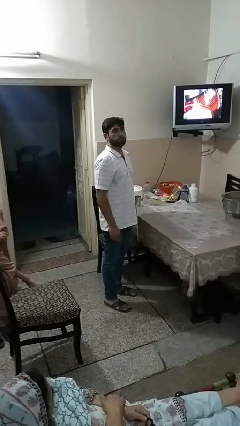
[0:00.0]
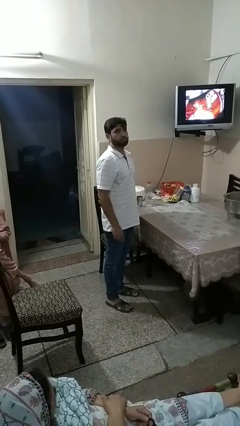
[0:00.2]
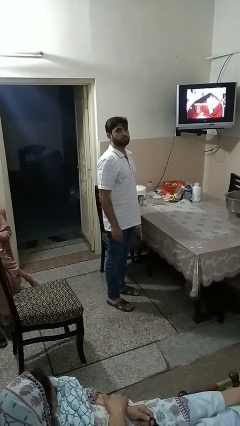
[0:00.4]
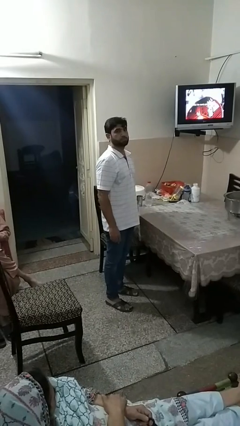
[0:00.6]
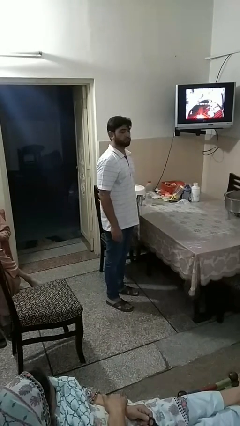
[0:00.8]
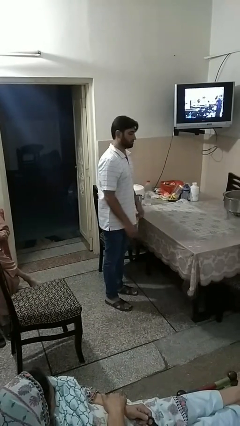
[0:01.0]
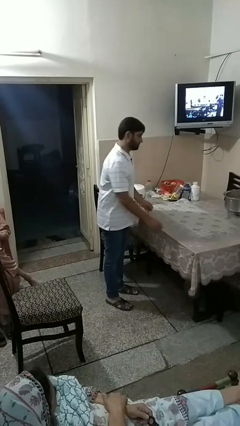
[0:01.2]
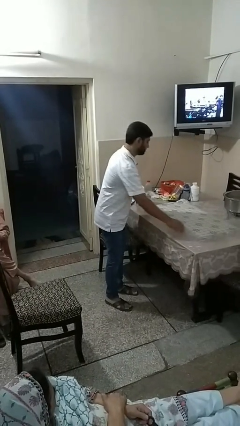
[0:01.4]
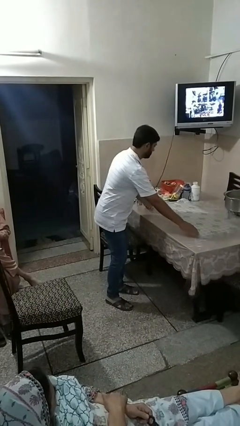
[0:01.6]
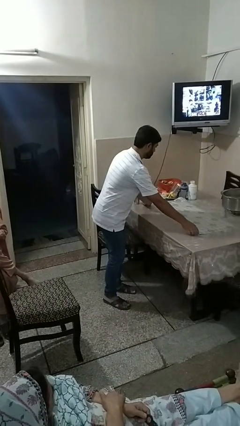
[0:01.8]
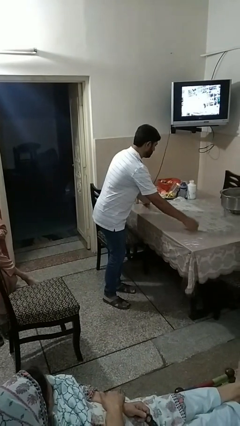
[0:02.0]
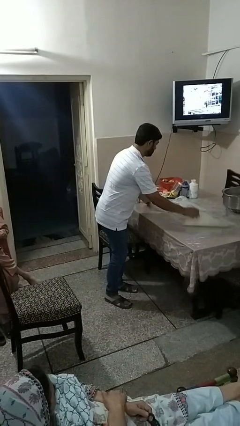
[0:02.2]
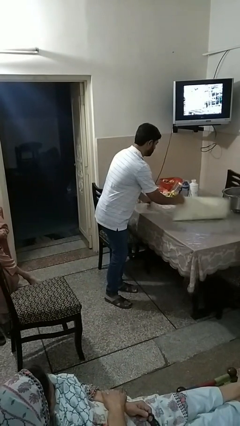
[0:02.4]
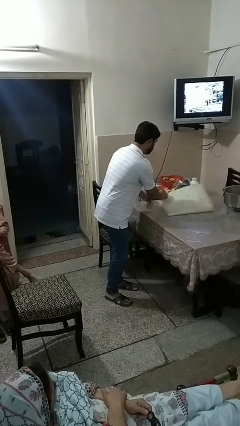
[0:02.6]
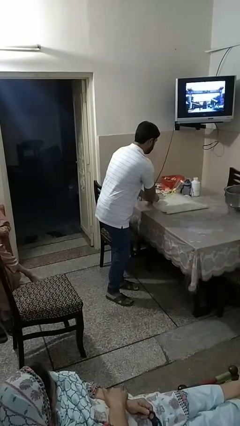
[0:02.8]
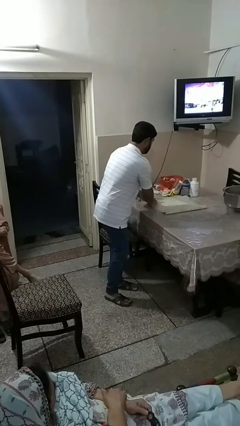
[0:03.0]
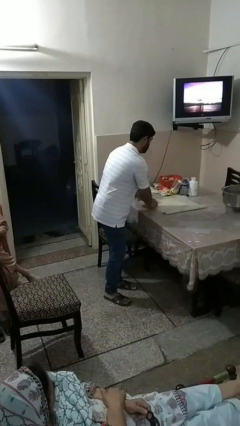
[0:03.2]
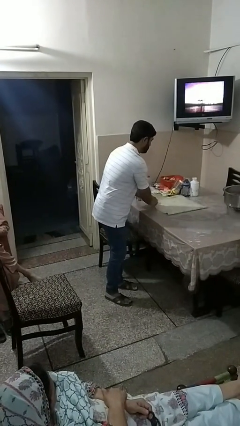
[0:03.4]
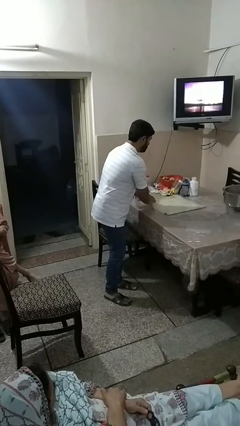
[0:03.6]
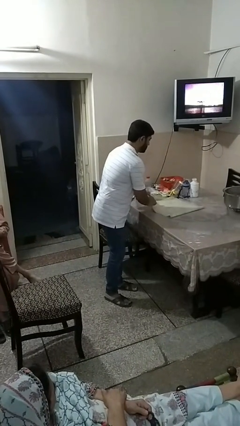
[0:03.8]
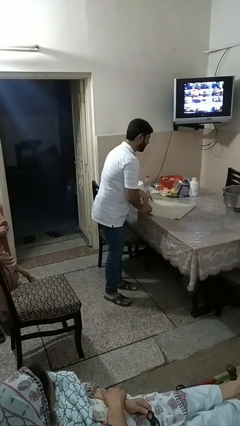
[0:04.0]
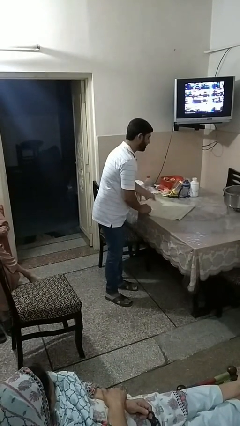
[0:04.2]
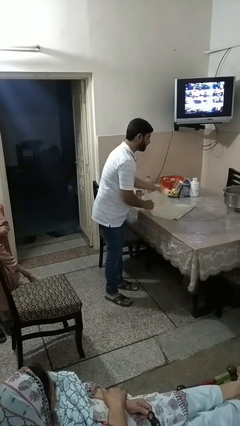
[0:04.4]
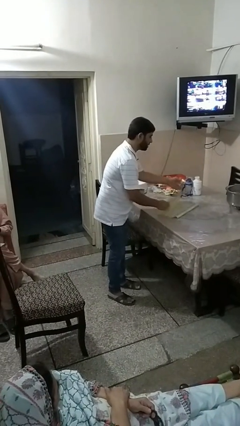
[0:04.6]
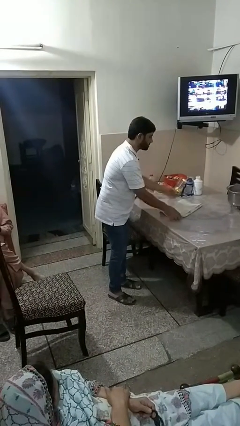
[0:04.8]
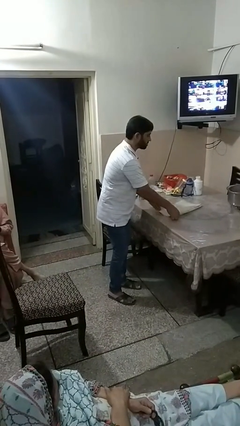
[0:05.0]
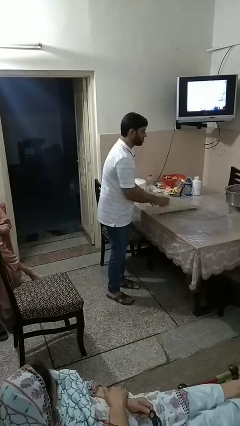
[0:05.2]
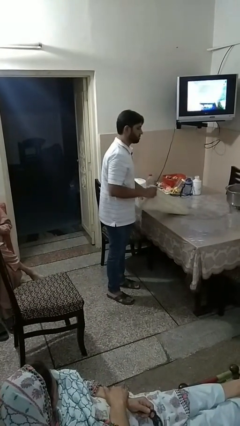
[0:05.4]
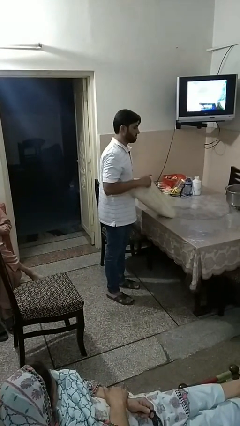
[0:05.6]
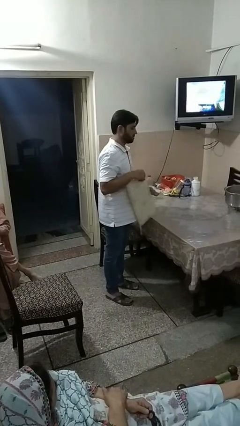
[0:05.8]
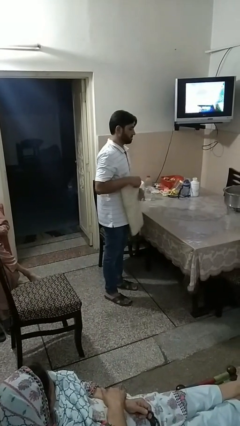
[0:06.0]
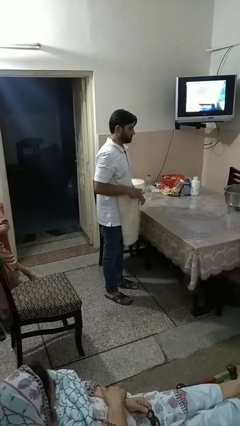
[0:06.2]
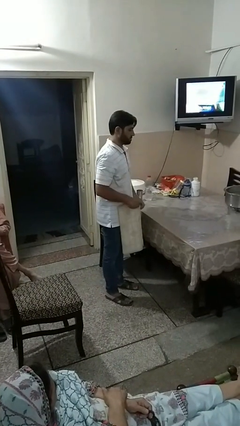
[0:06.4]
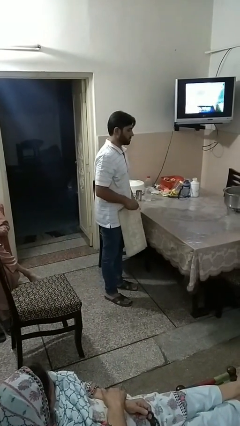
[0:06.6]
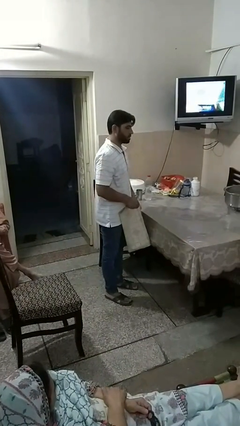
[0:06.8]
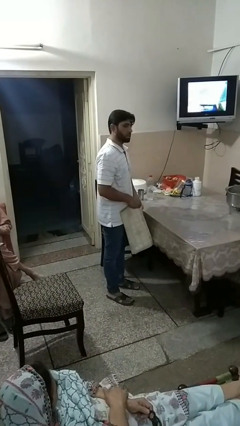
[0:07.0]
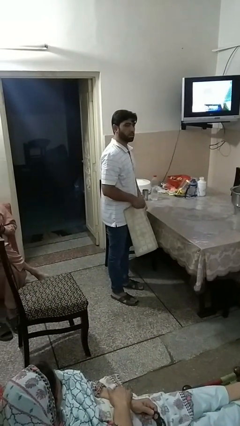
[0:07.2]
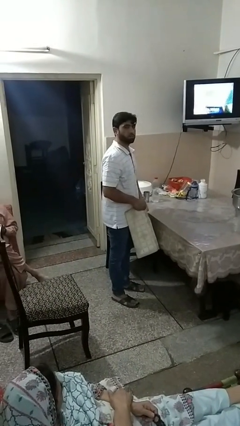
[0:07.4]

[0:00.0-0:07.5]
person folds tablecloth

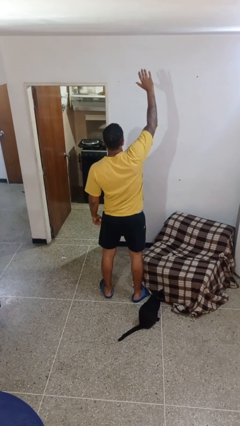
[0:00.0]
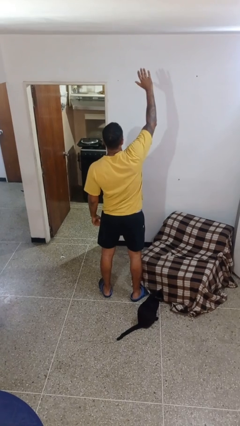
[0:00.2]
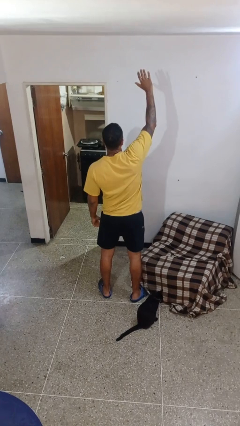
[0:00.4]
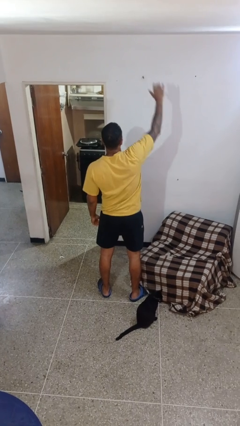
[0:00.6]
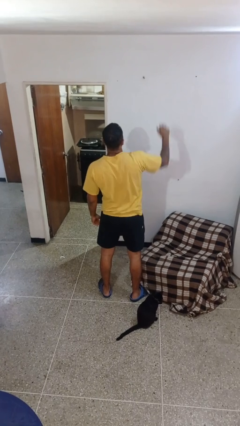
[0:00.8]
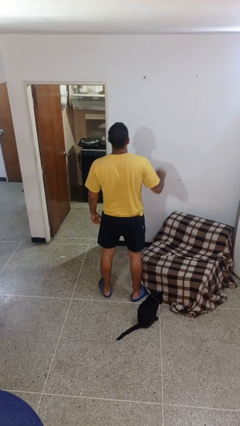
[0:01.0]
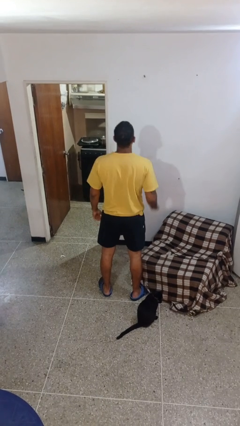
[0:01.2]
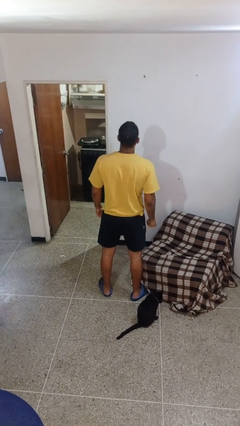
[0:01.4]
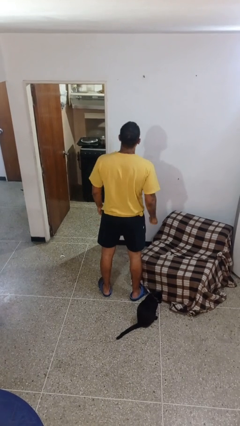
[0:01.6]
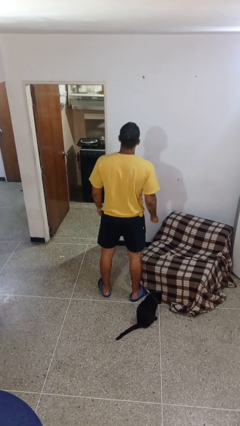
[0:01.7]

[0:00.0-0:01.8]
person gestures lower hand

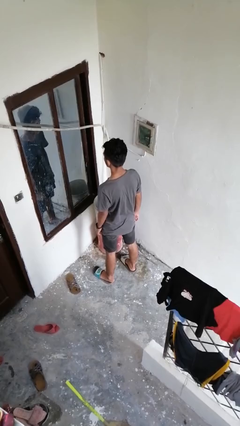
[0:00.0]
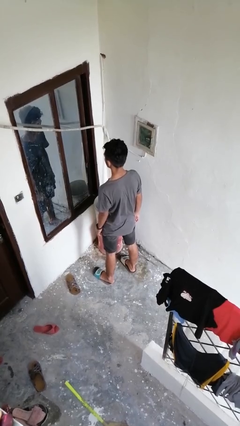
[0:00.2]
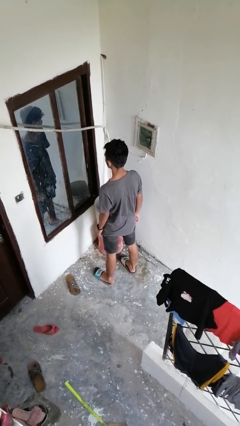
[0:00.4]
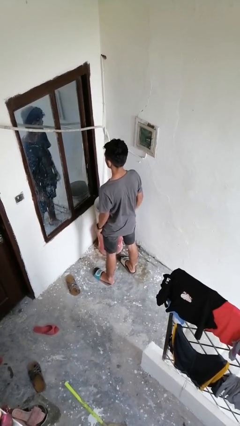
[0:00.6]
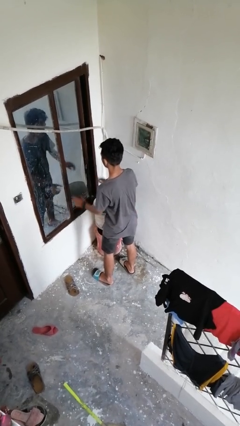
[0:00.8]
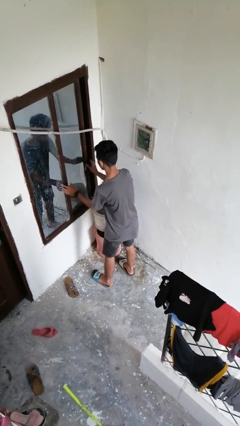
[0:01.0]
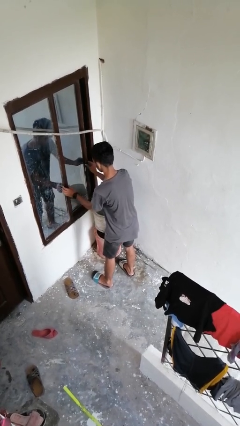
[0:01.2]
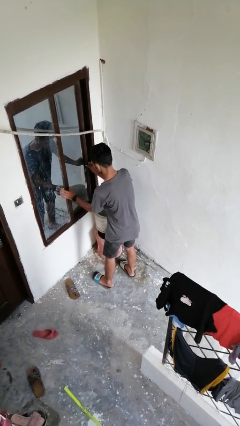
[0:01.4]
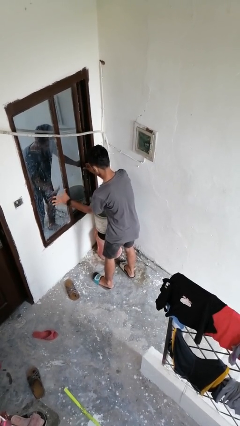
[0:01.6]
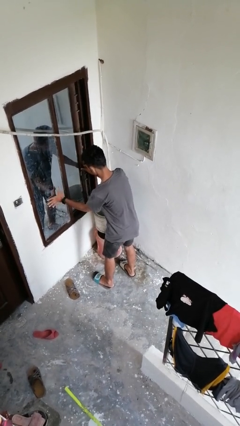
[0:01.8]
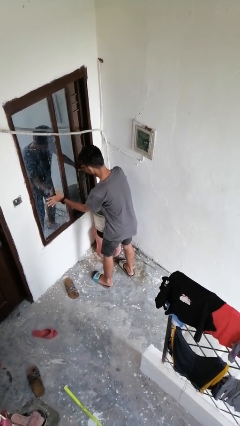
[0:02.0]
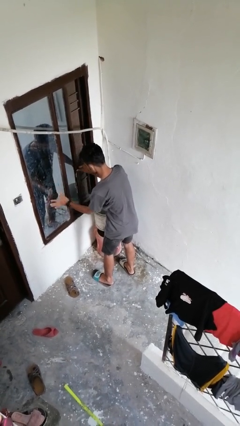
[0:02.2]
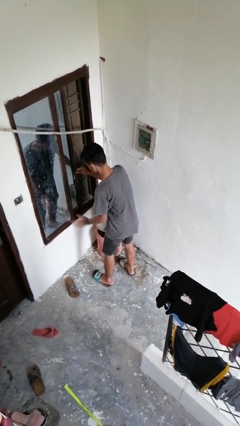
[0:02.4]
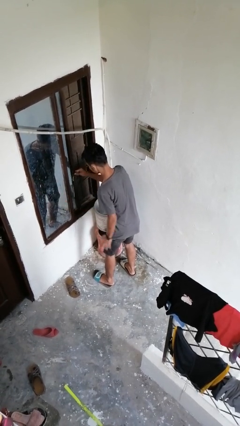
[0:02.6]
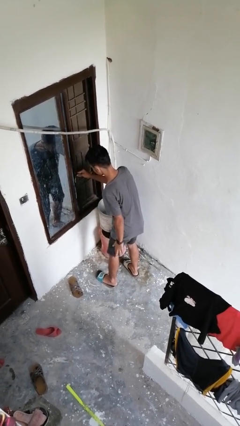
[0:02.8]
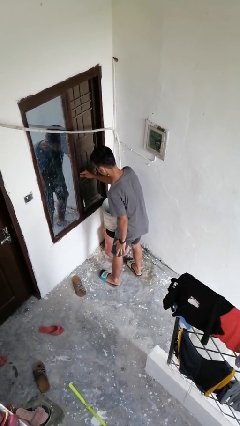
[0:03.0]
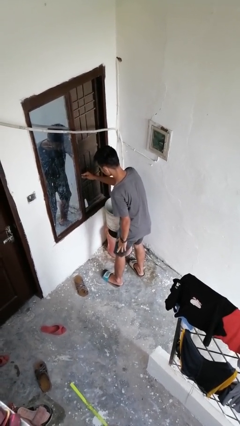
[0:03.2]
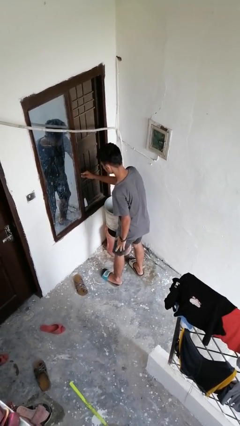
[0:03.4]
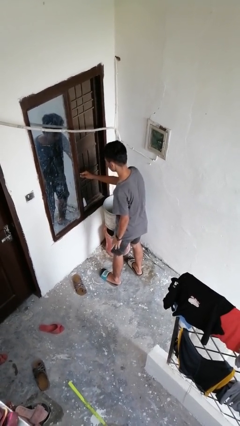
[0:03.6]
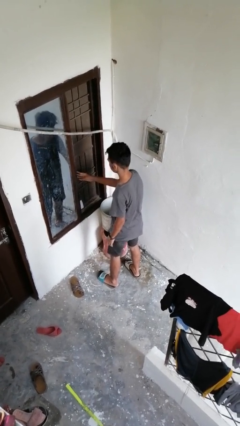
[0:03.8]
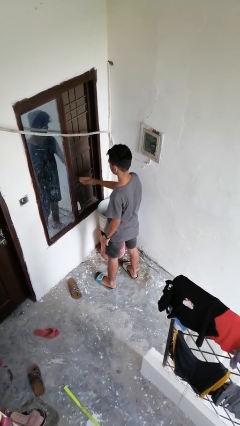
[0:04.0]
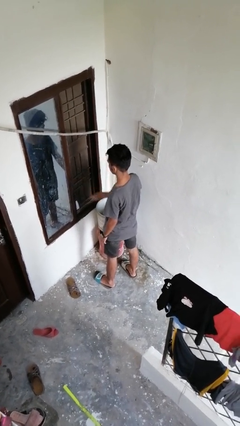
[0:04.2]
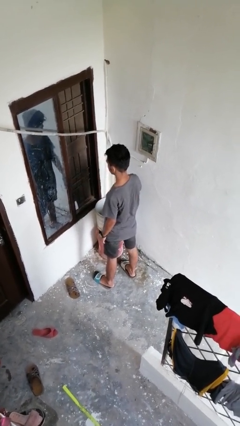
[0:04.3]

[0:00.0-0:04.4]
person opens home window

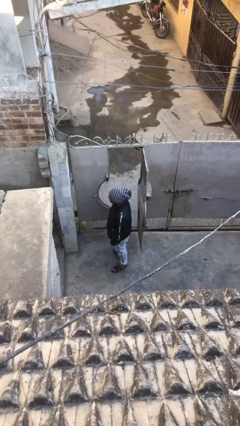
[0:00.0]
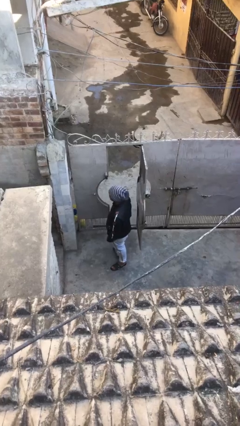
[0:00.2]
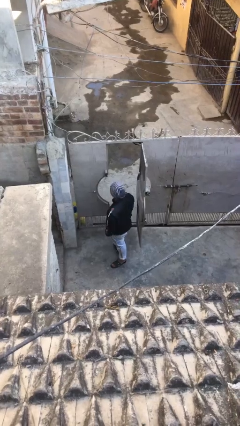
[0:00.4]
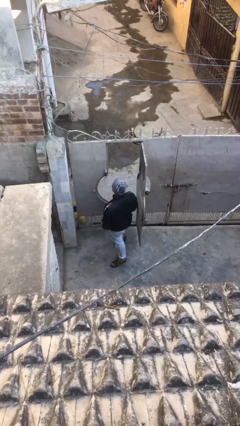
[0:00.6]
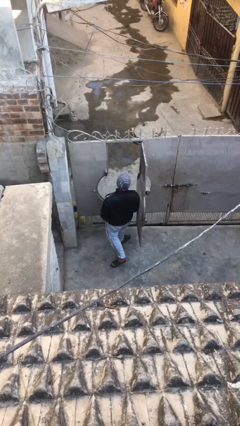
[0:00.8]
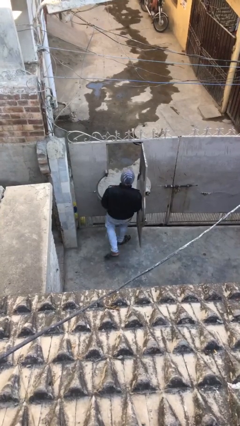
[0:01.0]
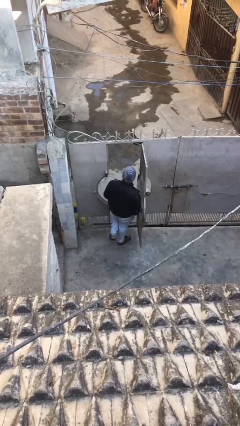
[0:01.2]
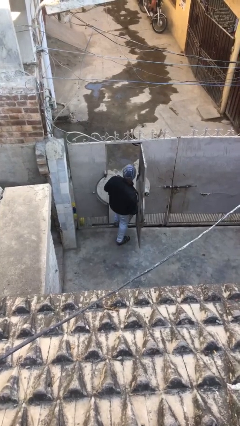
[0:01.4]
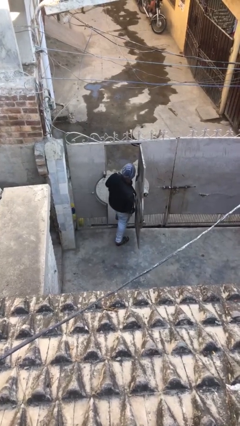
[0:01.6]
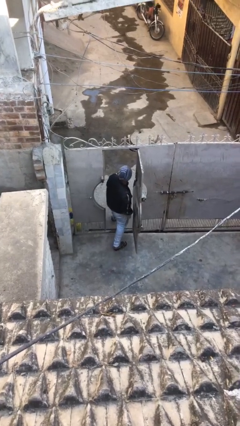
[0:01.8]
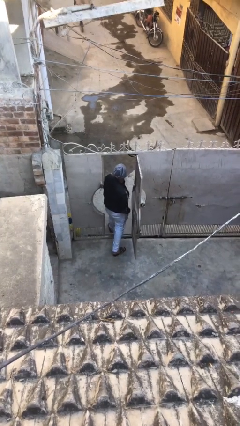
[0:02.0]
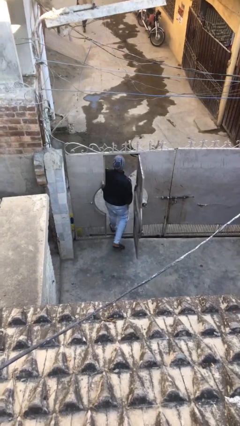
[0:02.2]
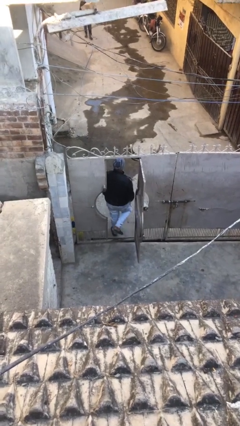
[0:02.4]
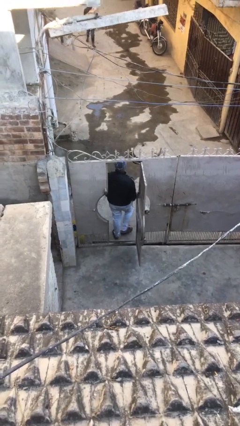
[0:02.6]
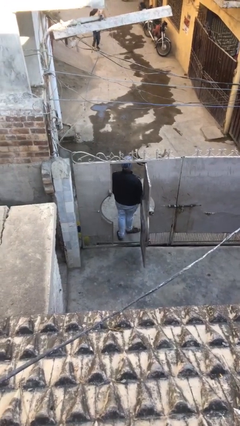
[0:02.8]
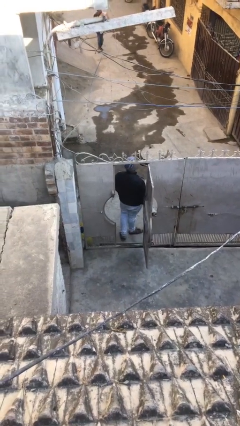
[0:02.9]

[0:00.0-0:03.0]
person exits scene through structure

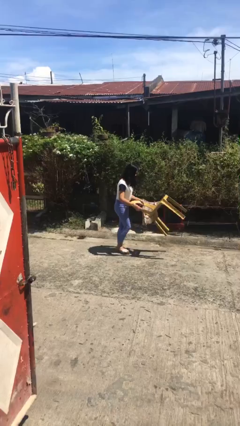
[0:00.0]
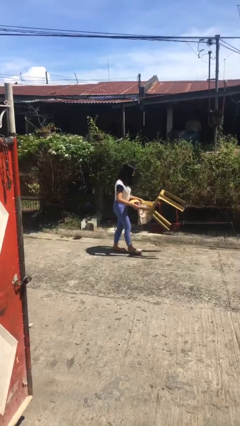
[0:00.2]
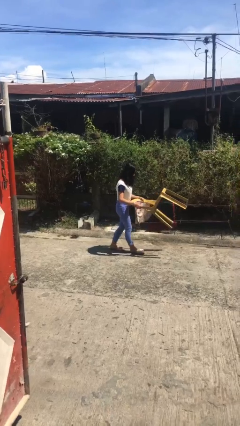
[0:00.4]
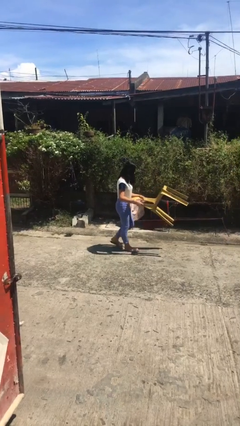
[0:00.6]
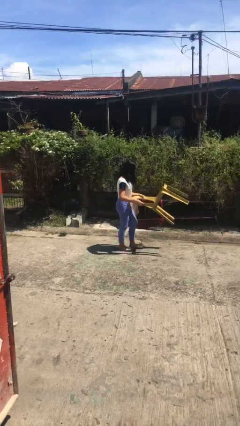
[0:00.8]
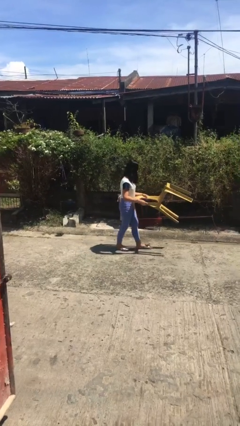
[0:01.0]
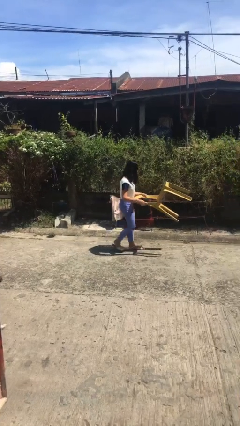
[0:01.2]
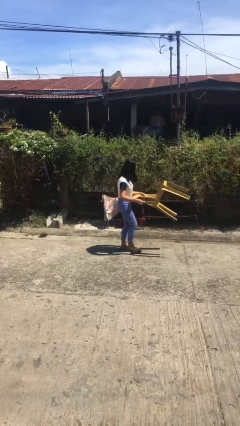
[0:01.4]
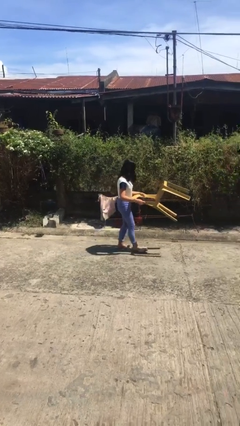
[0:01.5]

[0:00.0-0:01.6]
person carries heavy object
